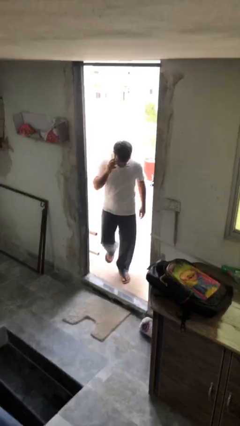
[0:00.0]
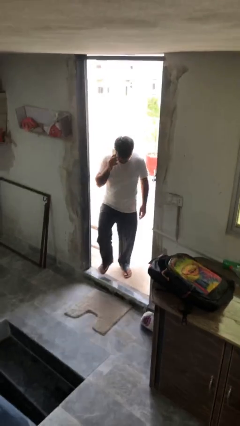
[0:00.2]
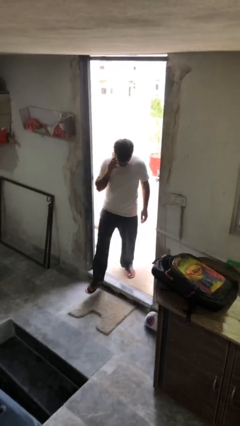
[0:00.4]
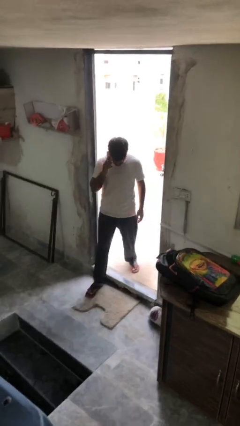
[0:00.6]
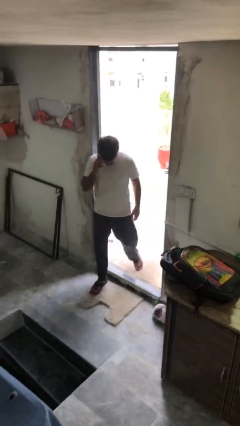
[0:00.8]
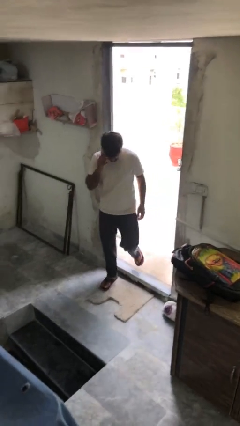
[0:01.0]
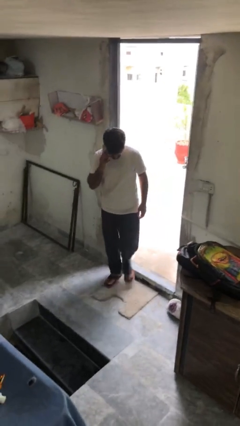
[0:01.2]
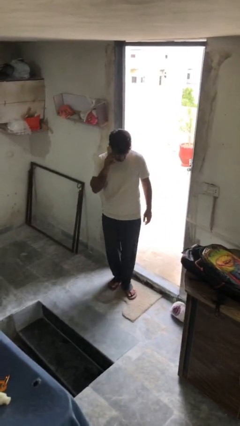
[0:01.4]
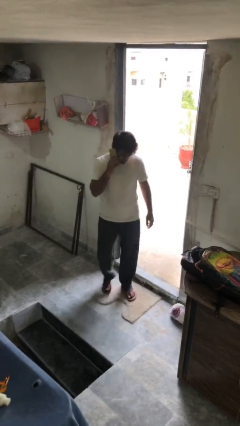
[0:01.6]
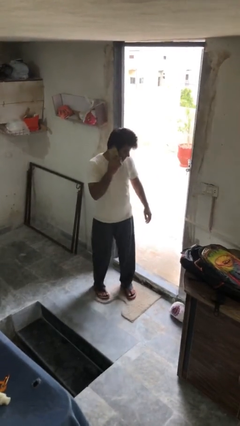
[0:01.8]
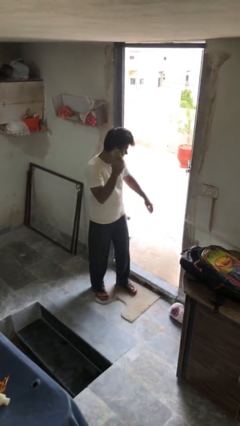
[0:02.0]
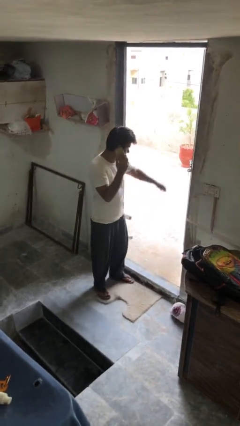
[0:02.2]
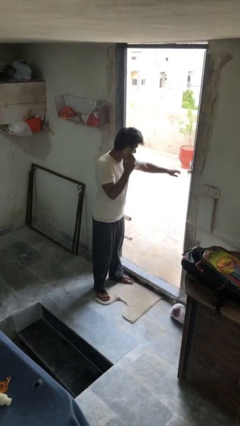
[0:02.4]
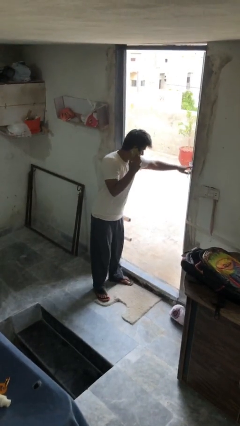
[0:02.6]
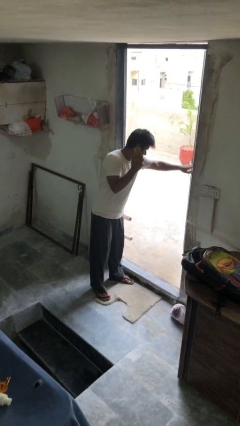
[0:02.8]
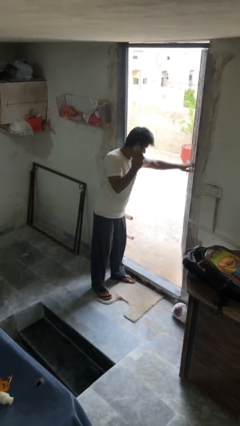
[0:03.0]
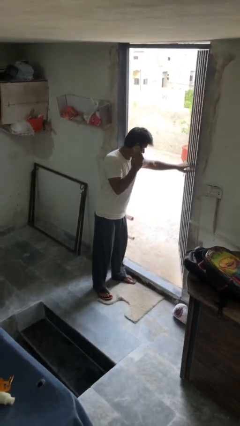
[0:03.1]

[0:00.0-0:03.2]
person enters scene through structure

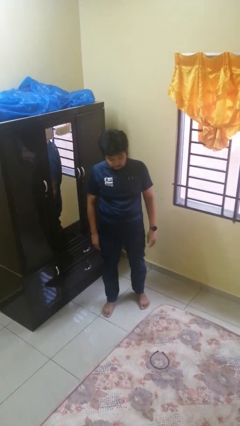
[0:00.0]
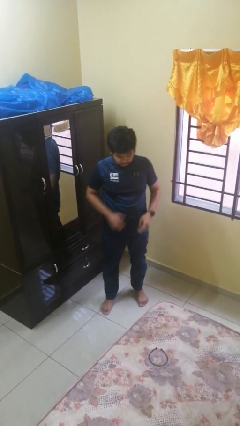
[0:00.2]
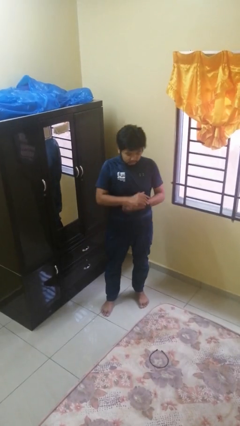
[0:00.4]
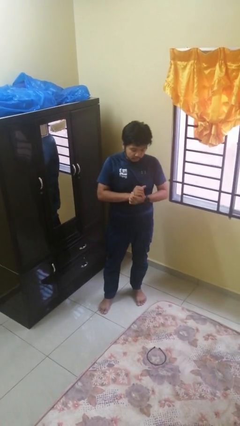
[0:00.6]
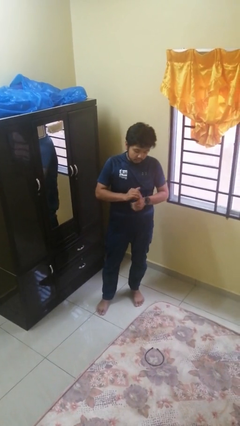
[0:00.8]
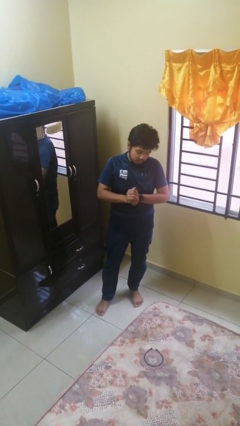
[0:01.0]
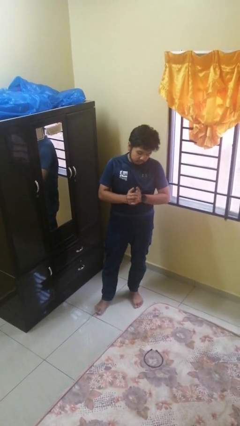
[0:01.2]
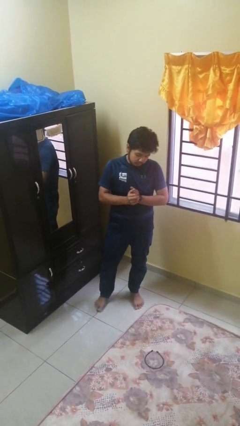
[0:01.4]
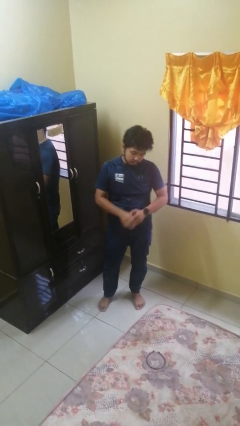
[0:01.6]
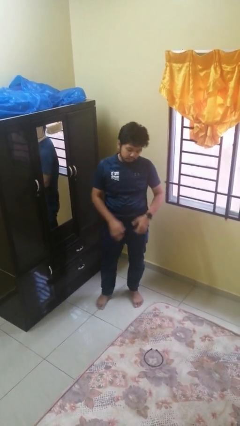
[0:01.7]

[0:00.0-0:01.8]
person cracks knuckles

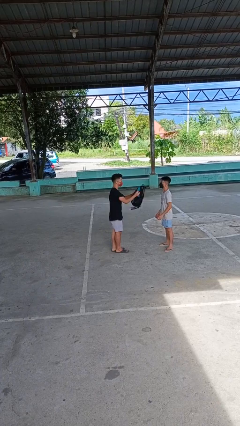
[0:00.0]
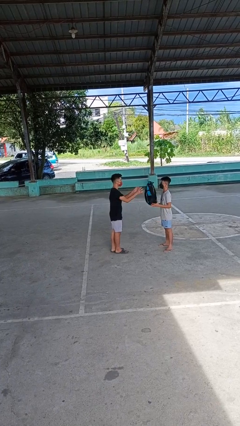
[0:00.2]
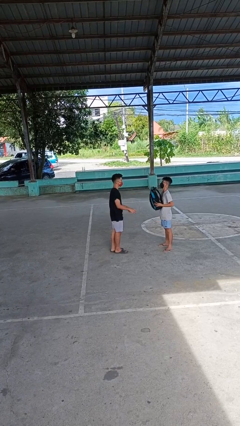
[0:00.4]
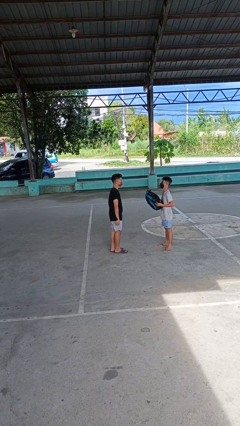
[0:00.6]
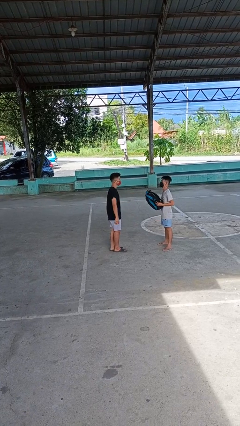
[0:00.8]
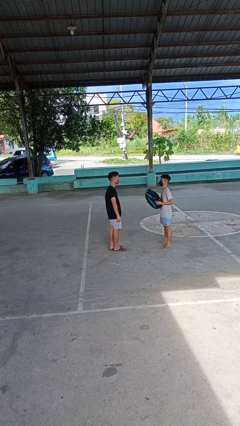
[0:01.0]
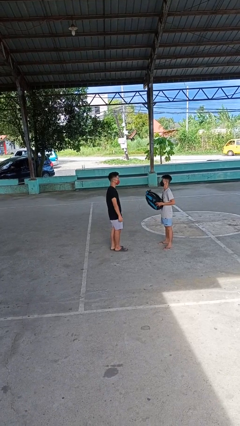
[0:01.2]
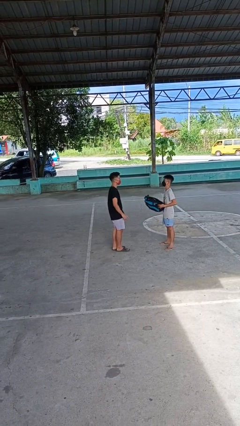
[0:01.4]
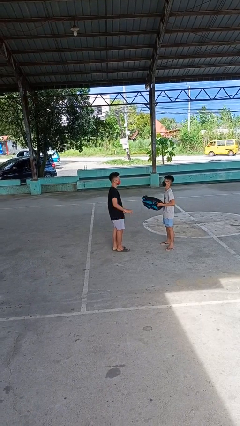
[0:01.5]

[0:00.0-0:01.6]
person throws object to person

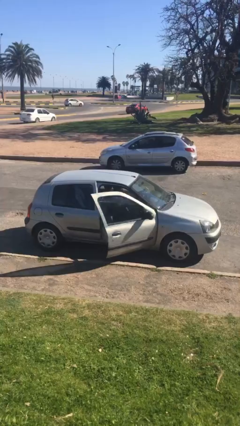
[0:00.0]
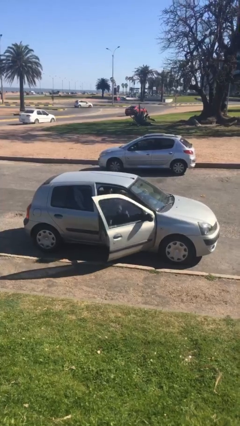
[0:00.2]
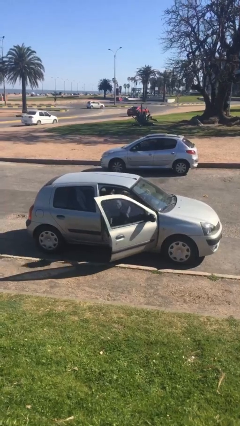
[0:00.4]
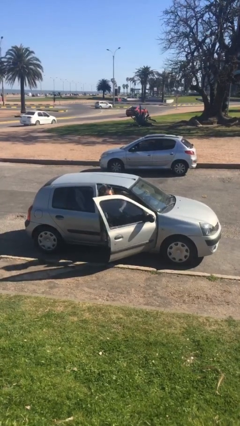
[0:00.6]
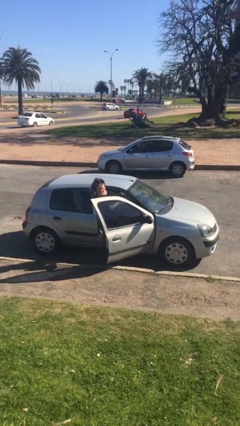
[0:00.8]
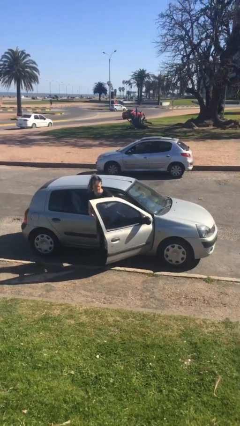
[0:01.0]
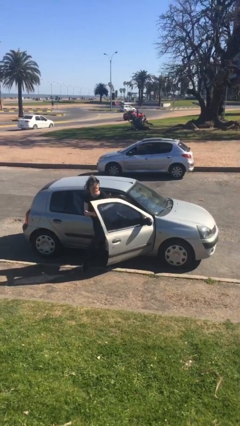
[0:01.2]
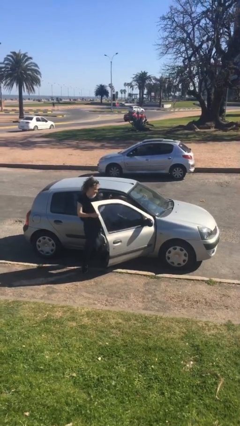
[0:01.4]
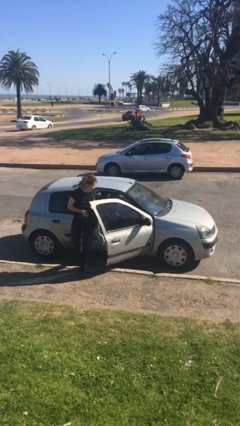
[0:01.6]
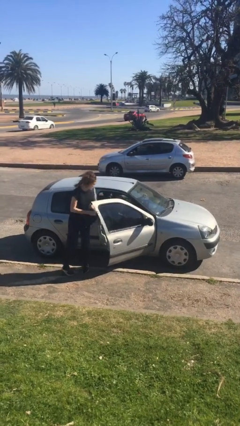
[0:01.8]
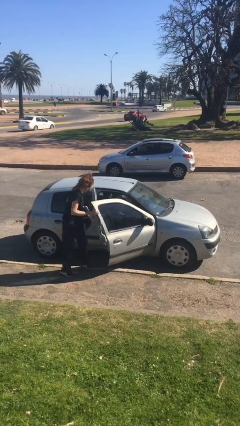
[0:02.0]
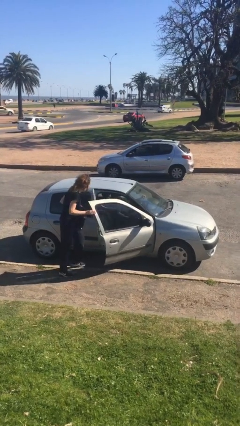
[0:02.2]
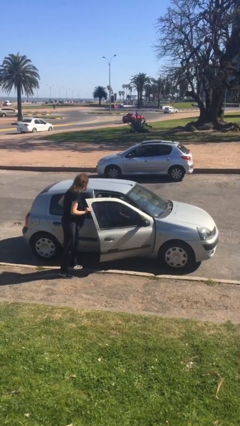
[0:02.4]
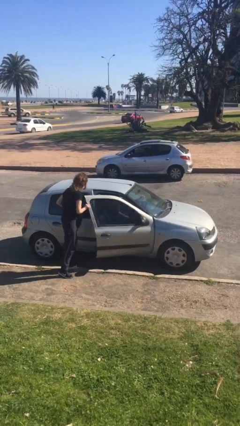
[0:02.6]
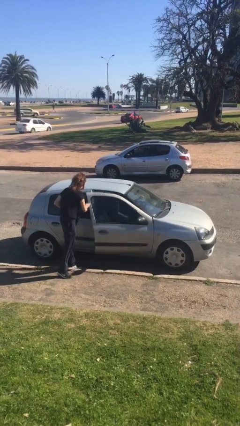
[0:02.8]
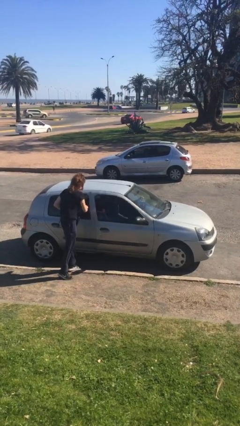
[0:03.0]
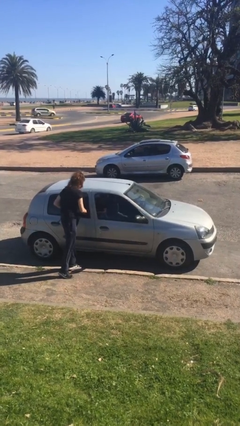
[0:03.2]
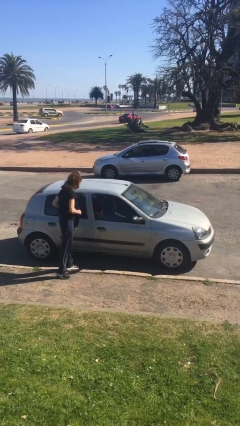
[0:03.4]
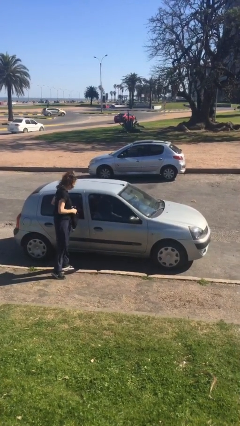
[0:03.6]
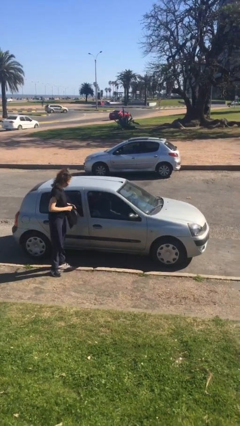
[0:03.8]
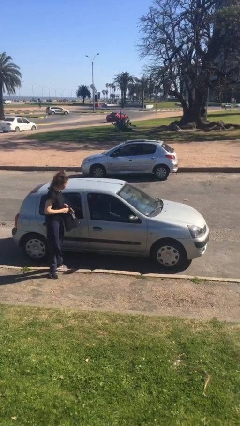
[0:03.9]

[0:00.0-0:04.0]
car drops off person

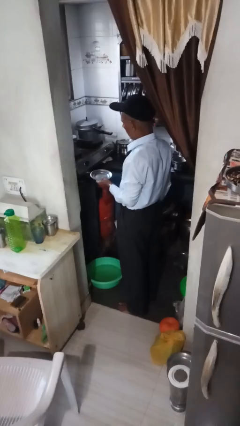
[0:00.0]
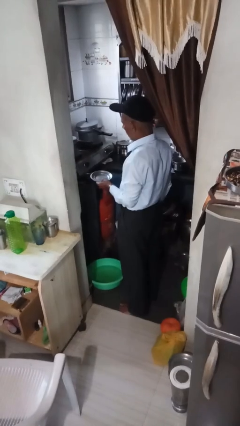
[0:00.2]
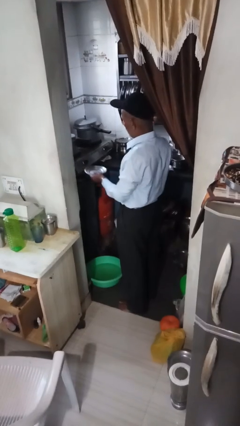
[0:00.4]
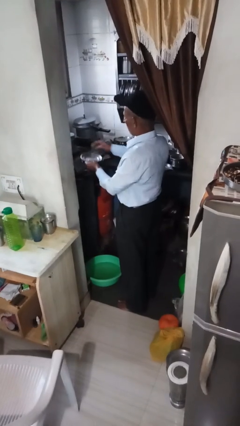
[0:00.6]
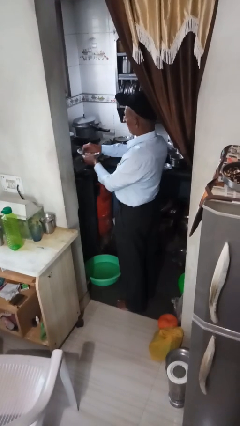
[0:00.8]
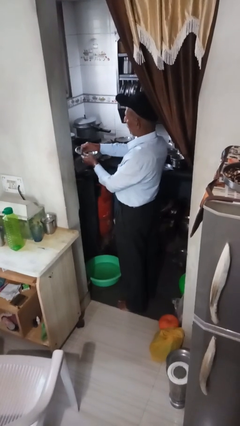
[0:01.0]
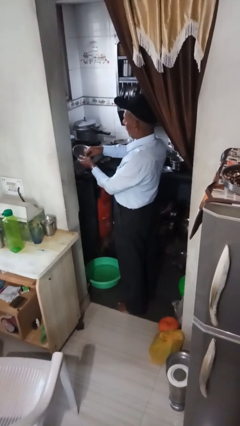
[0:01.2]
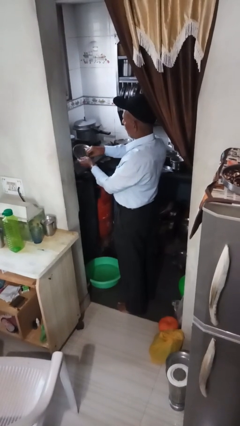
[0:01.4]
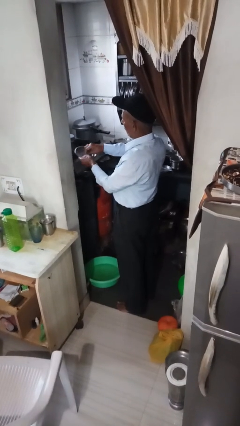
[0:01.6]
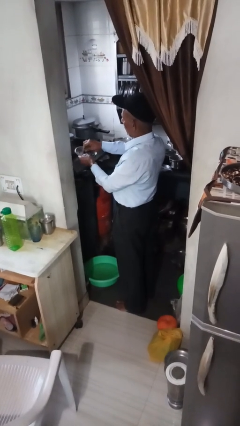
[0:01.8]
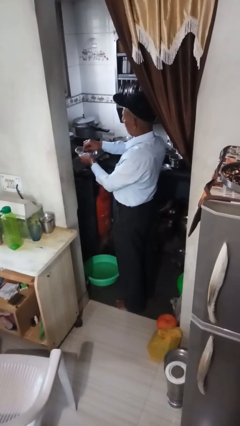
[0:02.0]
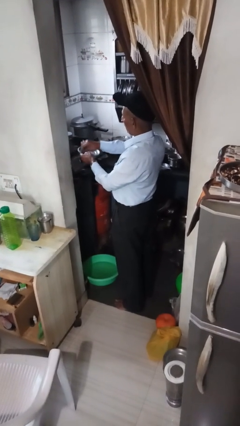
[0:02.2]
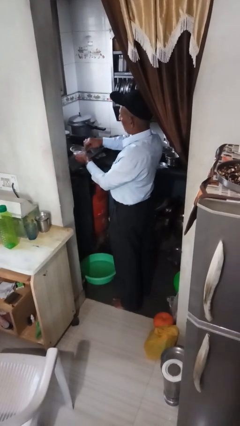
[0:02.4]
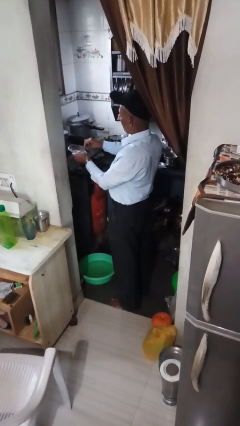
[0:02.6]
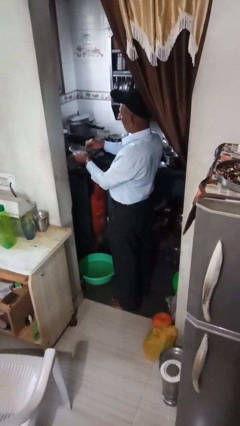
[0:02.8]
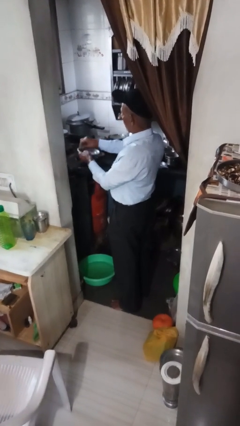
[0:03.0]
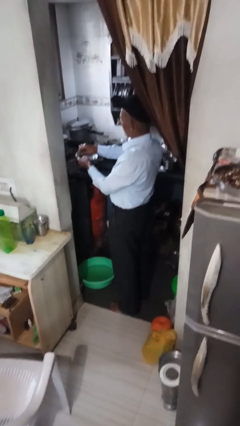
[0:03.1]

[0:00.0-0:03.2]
person washes dish

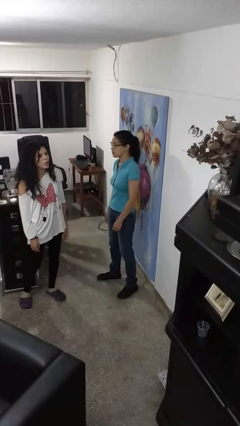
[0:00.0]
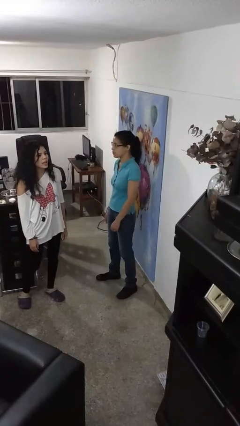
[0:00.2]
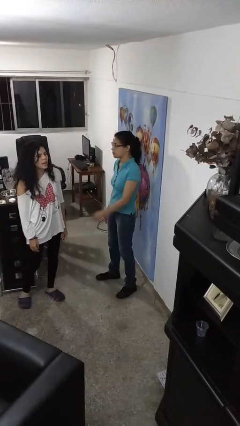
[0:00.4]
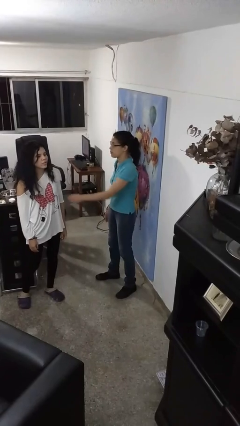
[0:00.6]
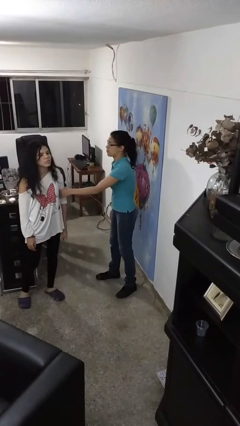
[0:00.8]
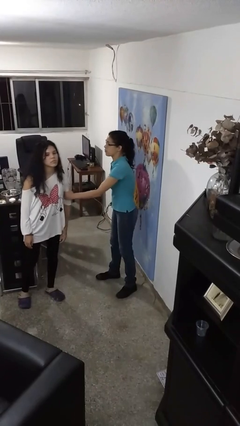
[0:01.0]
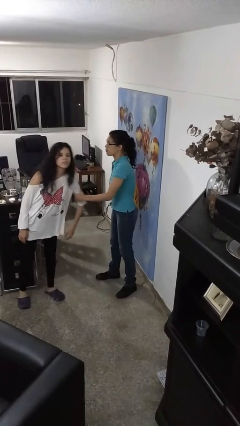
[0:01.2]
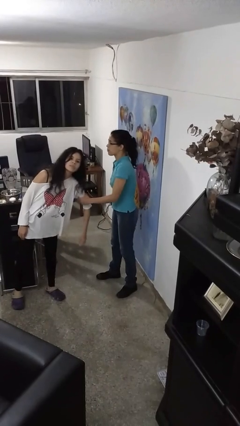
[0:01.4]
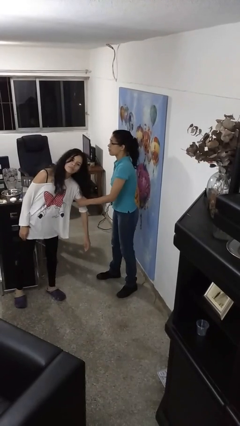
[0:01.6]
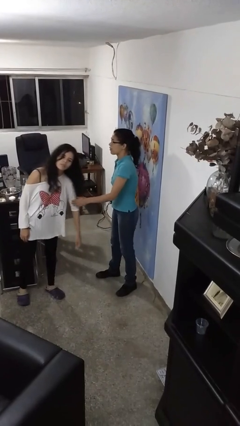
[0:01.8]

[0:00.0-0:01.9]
person grabs person by bicep

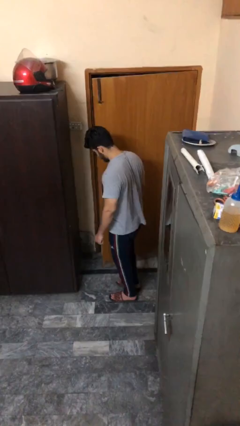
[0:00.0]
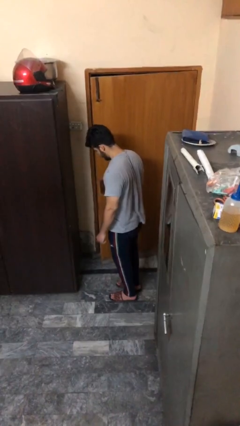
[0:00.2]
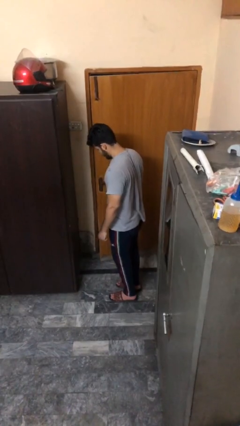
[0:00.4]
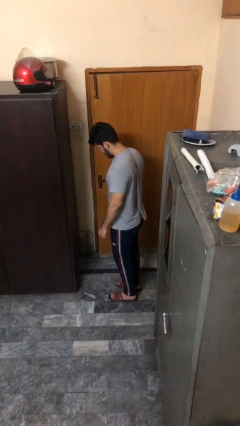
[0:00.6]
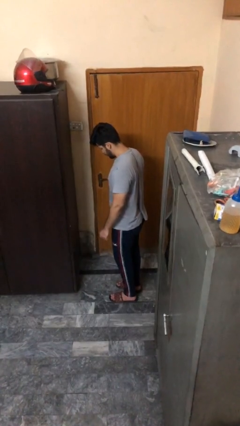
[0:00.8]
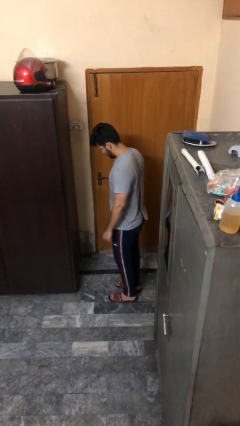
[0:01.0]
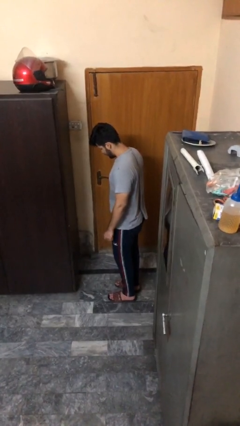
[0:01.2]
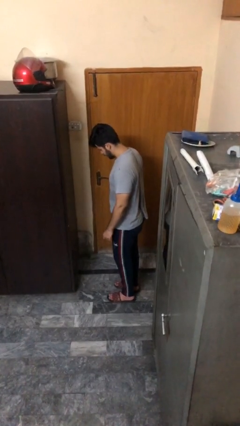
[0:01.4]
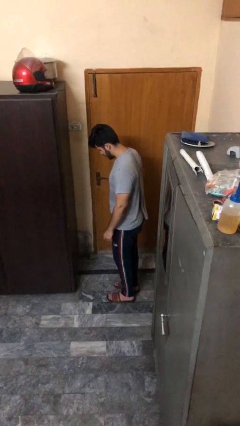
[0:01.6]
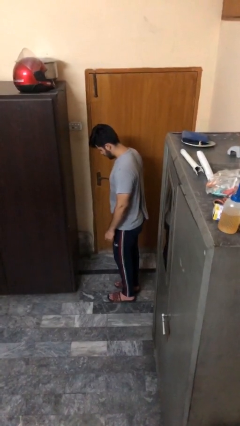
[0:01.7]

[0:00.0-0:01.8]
person closes door with foot
